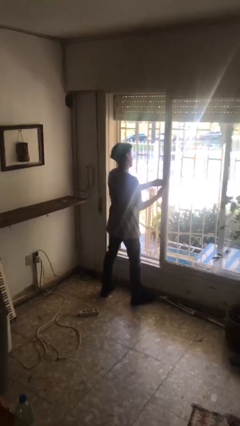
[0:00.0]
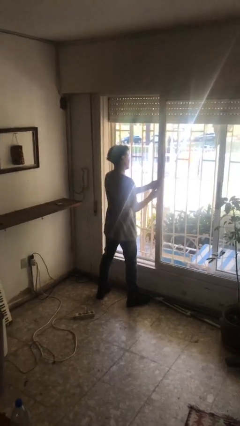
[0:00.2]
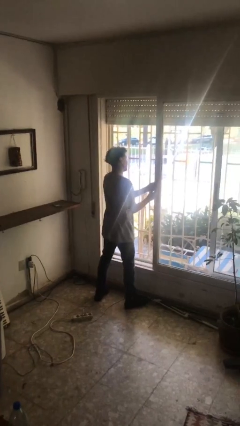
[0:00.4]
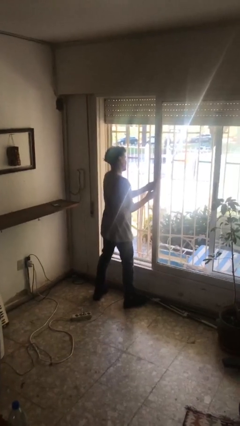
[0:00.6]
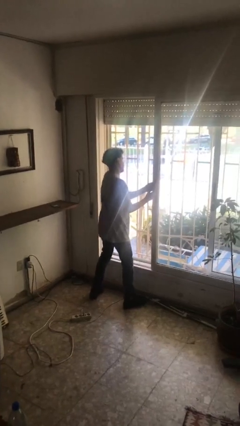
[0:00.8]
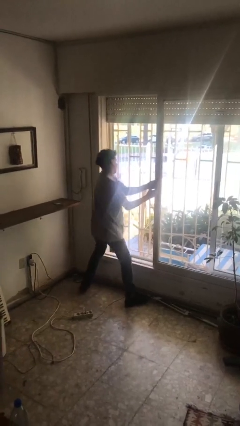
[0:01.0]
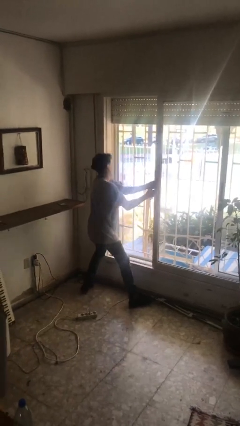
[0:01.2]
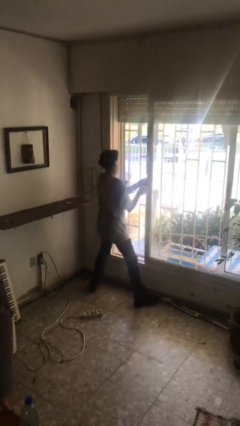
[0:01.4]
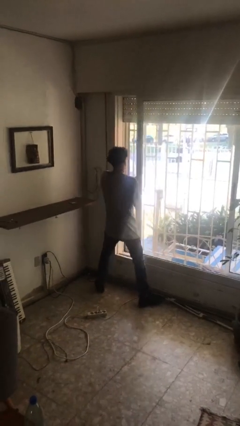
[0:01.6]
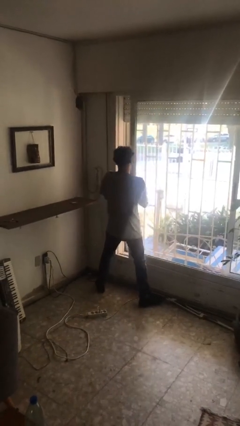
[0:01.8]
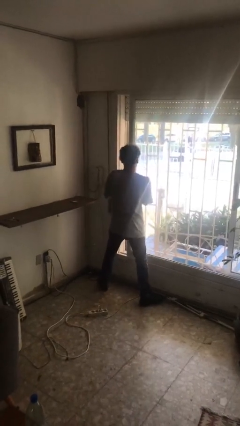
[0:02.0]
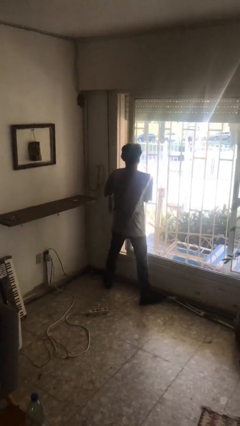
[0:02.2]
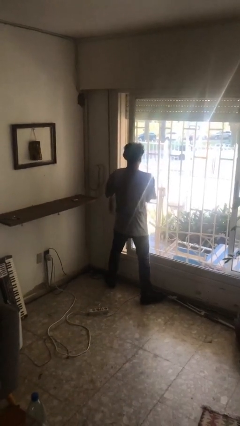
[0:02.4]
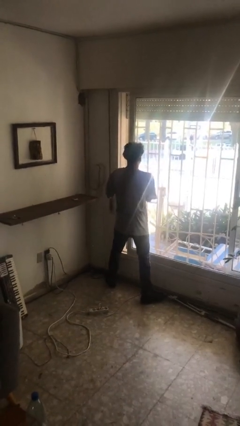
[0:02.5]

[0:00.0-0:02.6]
person closes sliding door

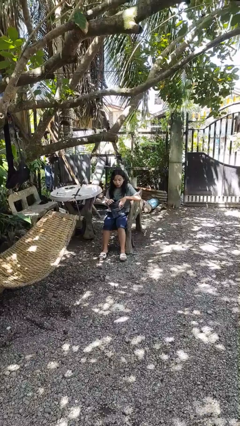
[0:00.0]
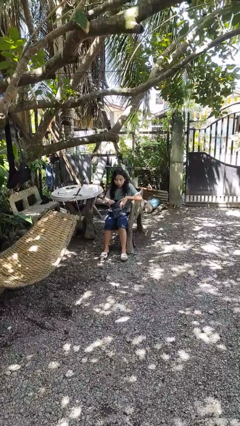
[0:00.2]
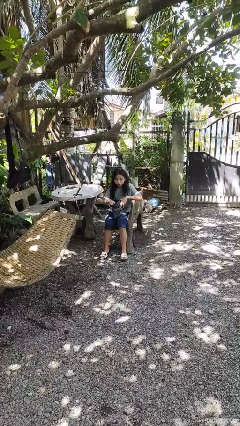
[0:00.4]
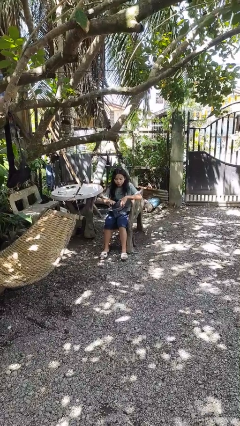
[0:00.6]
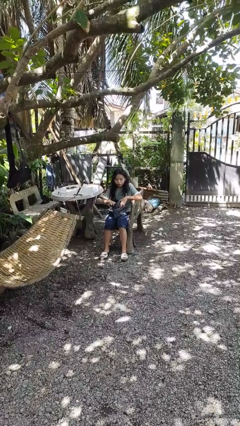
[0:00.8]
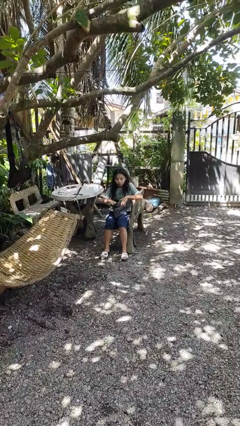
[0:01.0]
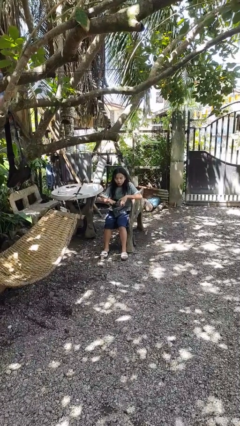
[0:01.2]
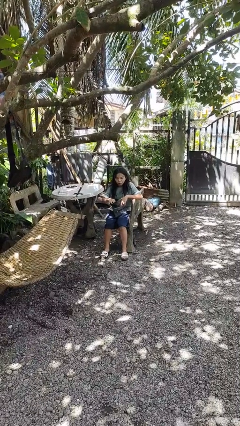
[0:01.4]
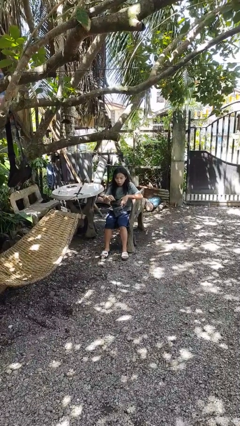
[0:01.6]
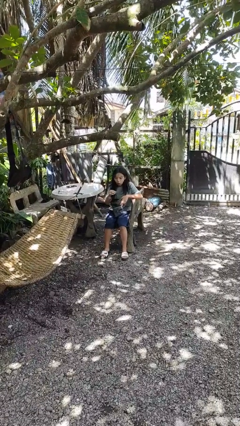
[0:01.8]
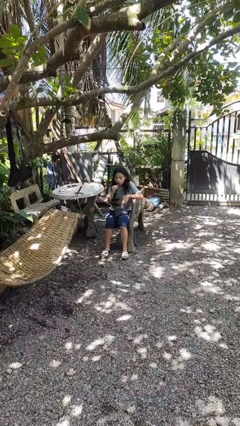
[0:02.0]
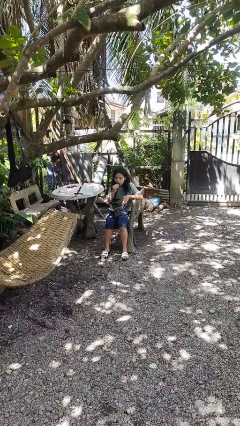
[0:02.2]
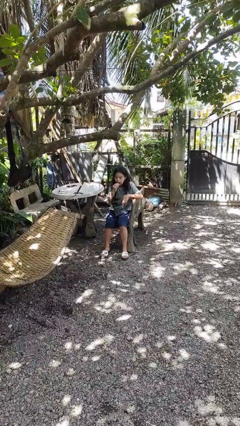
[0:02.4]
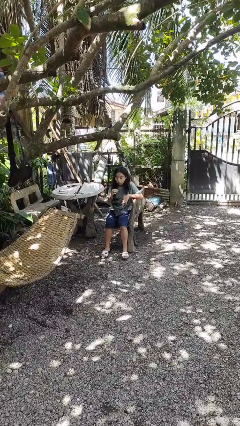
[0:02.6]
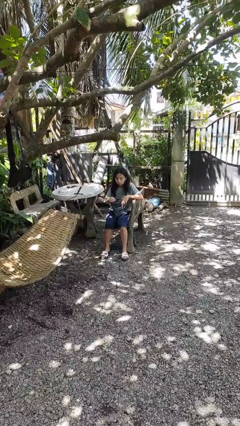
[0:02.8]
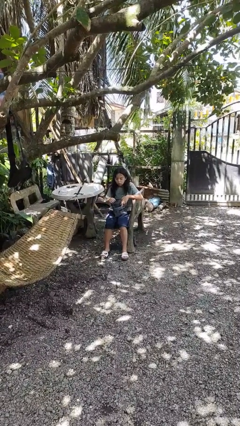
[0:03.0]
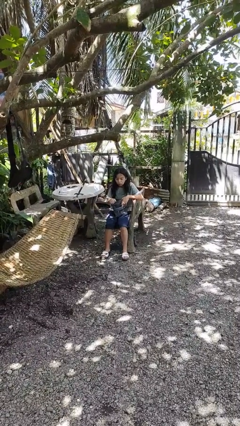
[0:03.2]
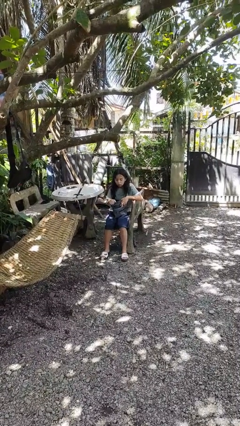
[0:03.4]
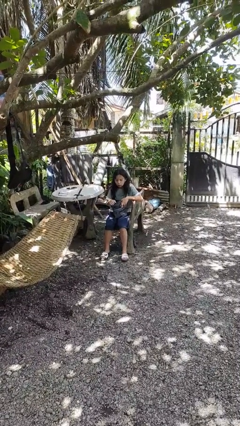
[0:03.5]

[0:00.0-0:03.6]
person eats snack from bag

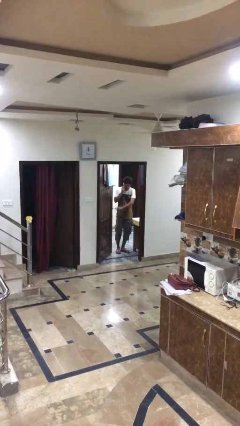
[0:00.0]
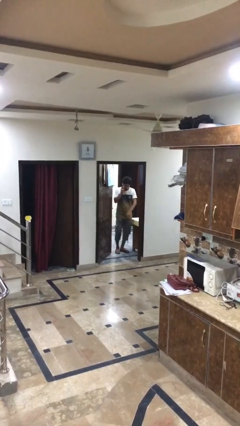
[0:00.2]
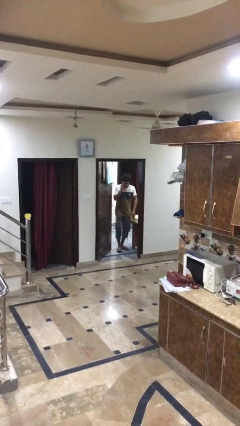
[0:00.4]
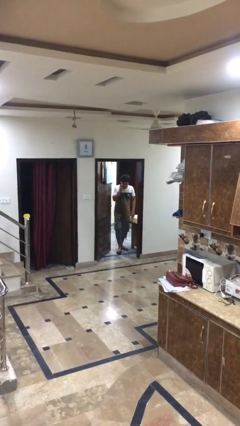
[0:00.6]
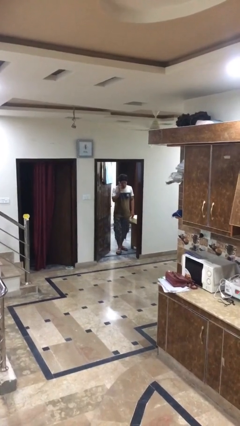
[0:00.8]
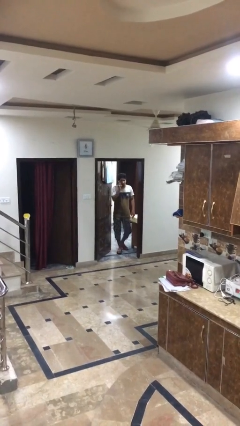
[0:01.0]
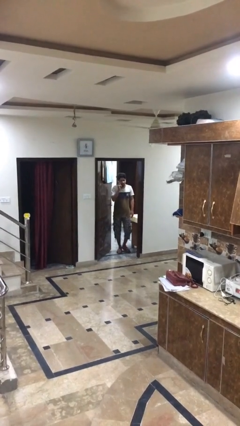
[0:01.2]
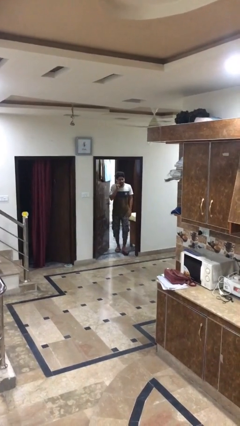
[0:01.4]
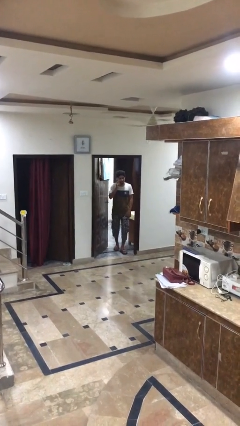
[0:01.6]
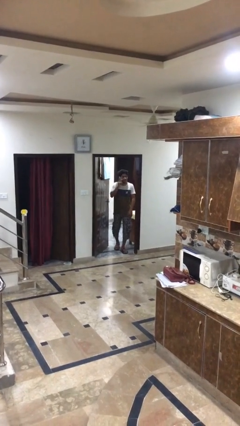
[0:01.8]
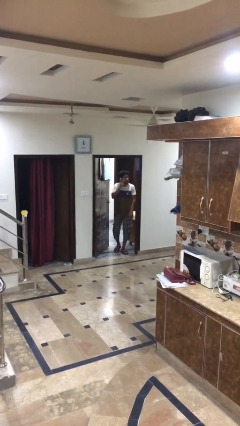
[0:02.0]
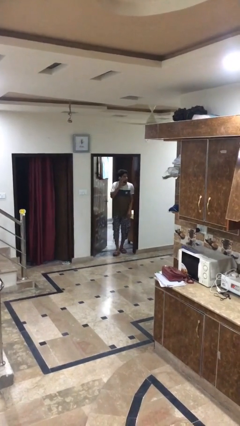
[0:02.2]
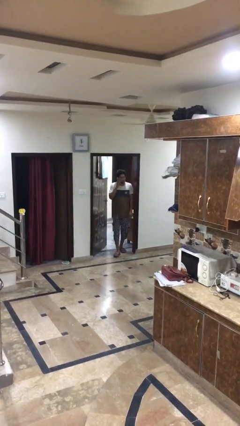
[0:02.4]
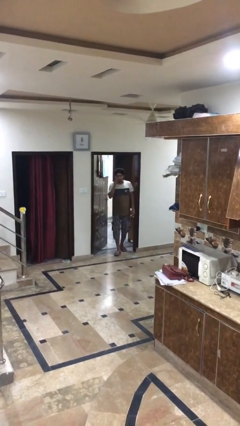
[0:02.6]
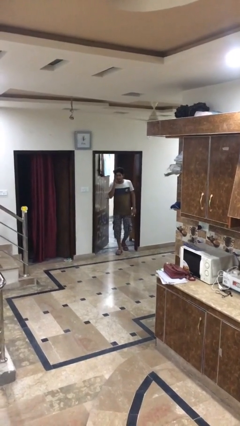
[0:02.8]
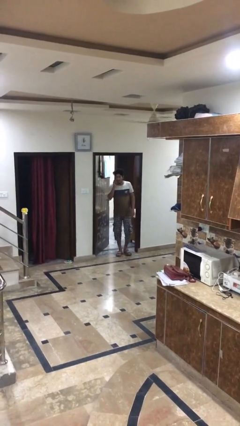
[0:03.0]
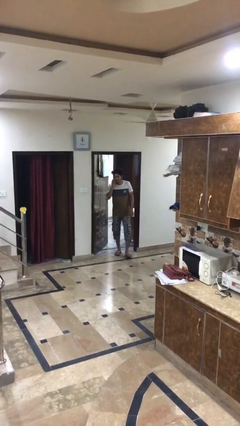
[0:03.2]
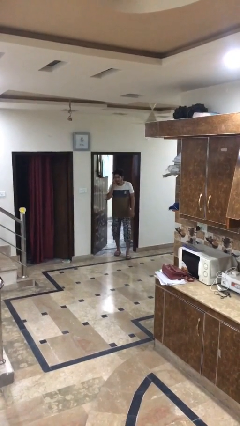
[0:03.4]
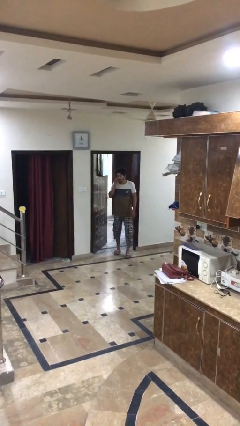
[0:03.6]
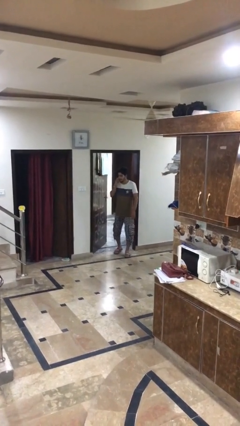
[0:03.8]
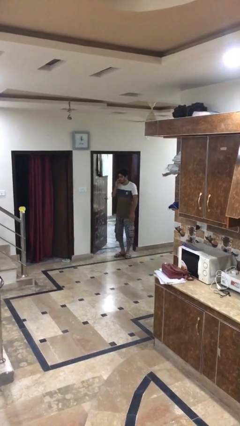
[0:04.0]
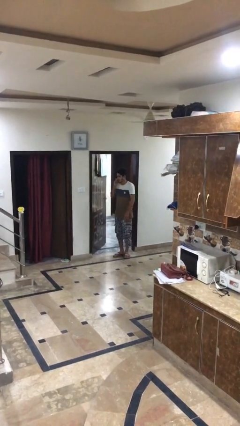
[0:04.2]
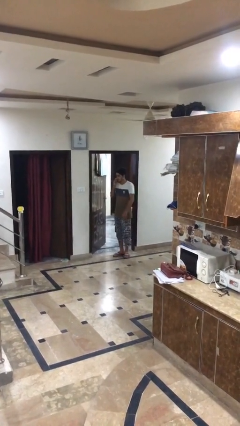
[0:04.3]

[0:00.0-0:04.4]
person enters scene through structure

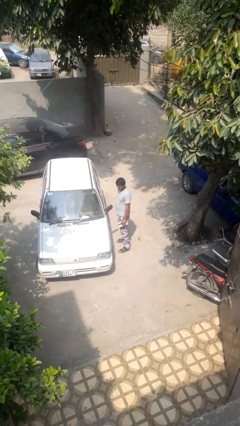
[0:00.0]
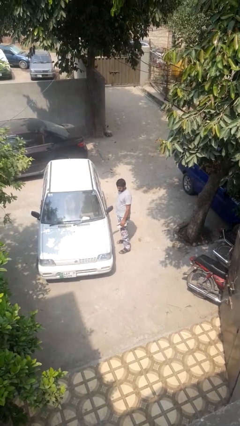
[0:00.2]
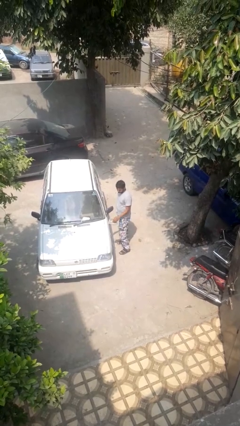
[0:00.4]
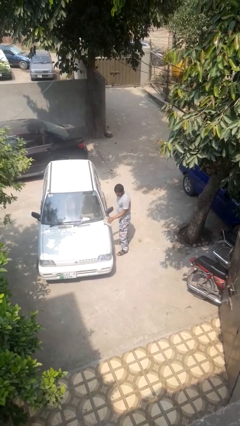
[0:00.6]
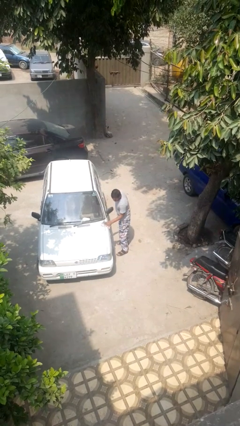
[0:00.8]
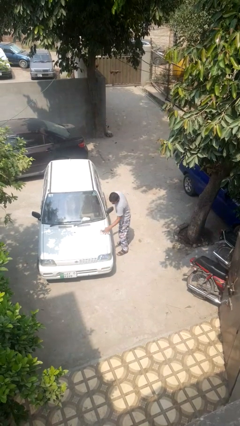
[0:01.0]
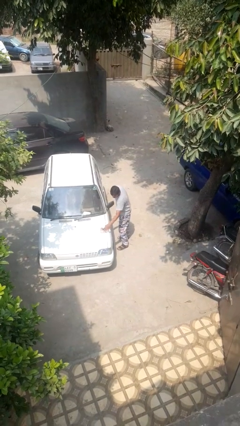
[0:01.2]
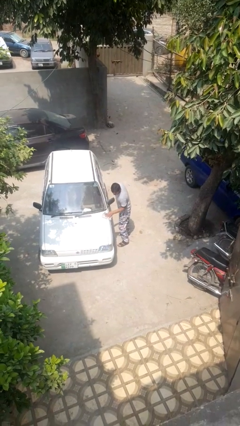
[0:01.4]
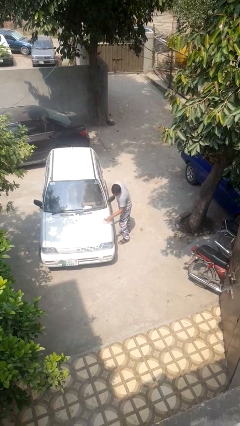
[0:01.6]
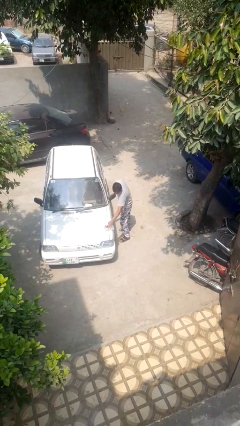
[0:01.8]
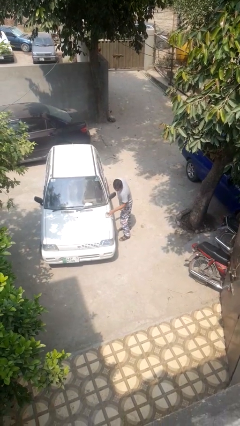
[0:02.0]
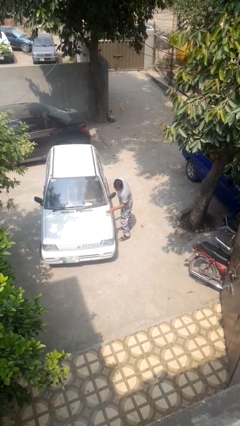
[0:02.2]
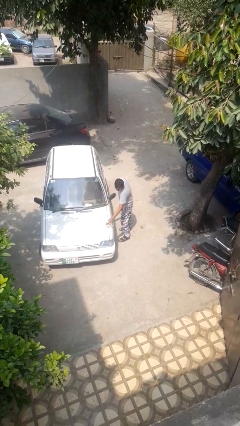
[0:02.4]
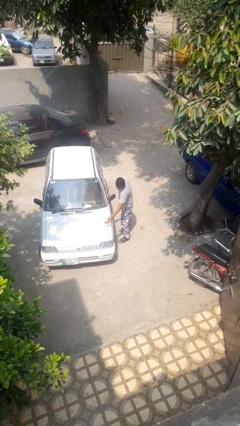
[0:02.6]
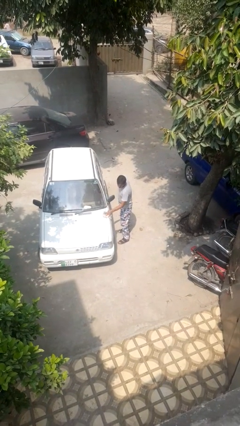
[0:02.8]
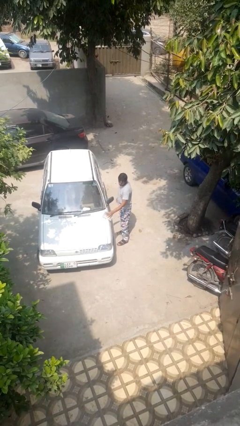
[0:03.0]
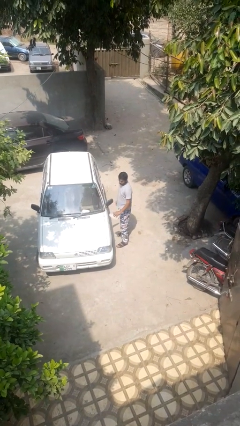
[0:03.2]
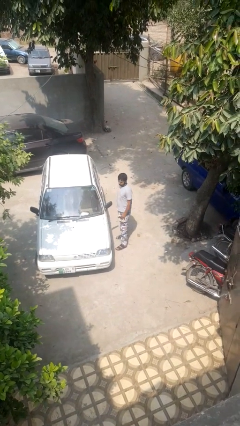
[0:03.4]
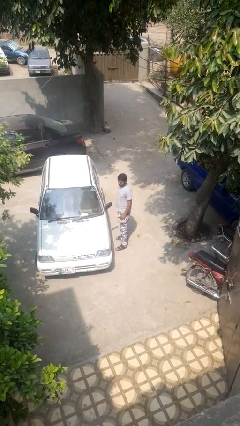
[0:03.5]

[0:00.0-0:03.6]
person polishes car with rag

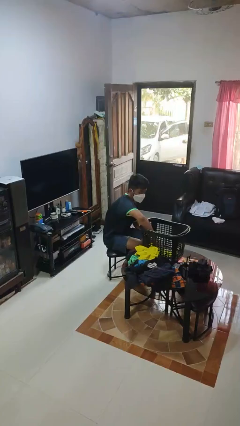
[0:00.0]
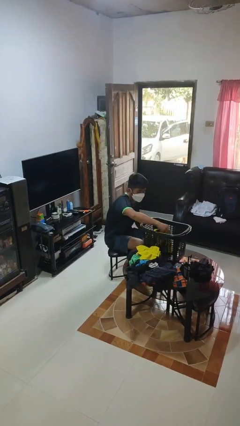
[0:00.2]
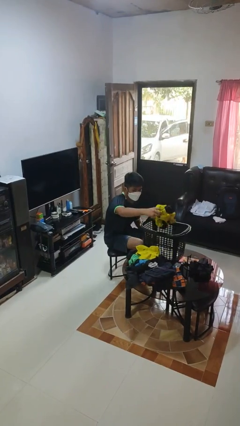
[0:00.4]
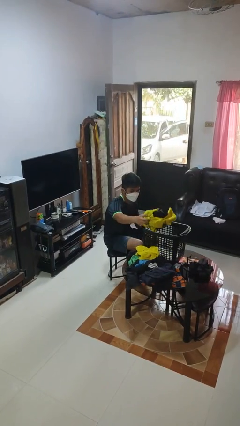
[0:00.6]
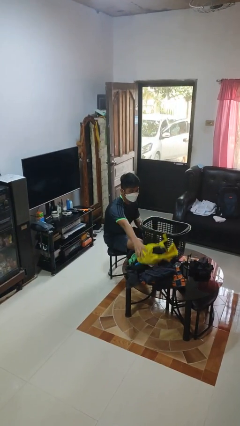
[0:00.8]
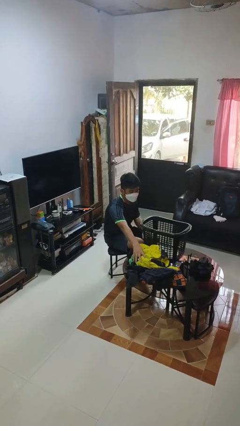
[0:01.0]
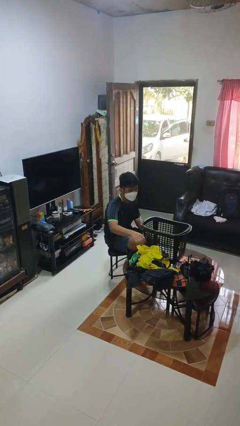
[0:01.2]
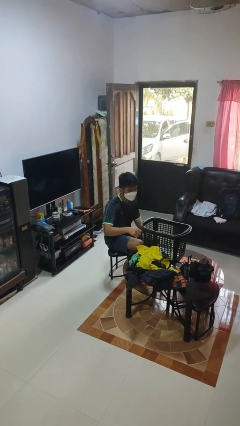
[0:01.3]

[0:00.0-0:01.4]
person takes object from basket

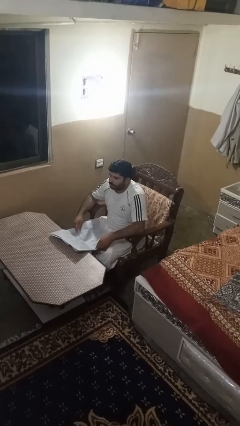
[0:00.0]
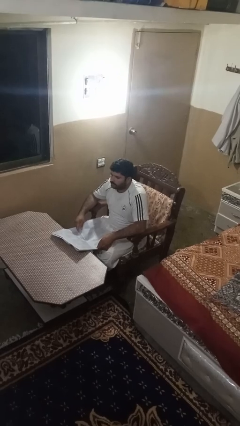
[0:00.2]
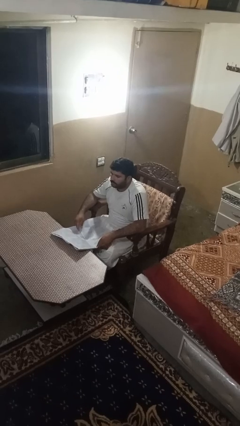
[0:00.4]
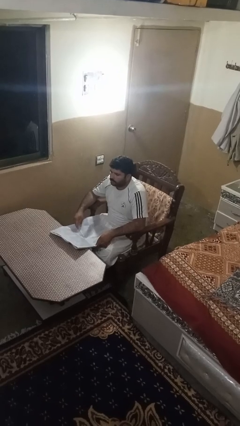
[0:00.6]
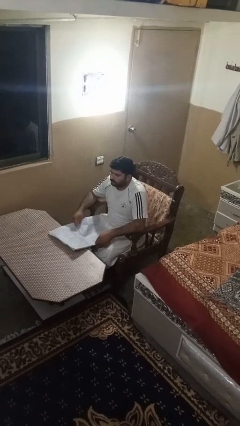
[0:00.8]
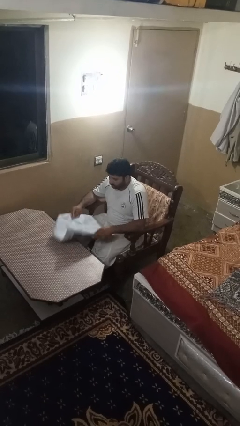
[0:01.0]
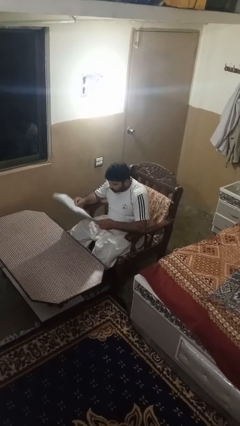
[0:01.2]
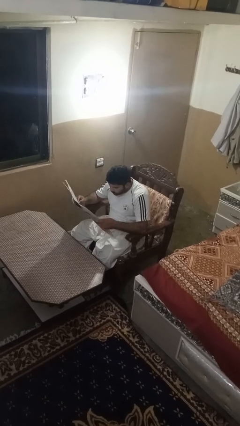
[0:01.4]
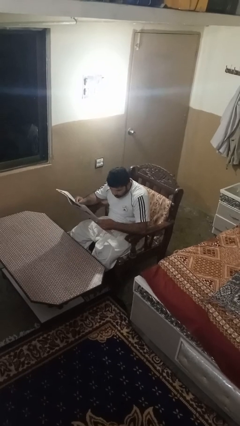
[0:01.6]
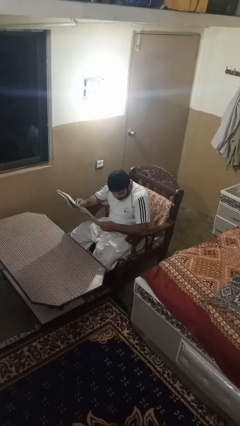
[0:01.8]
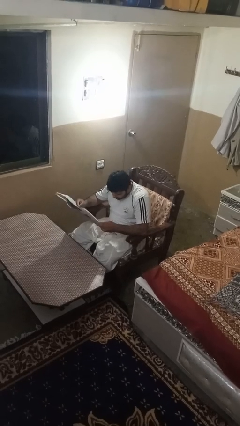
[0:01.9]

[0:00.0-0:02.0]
person reads newspaper
